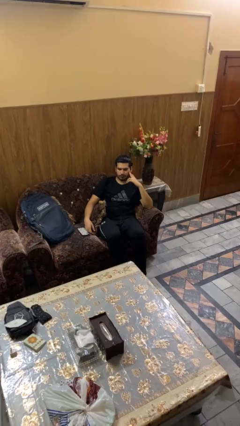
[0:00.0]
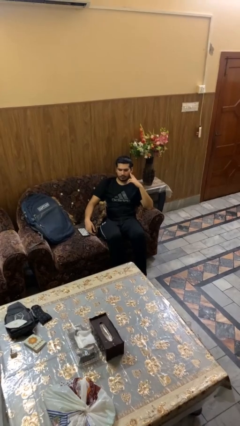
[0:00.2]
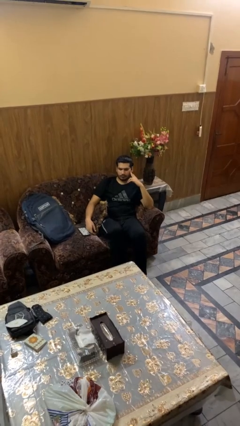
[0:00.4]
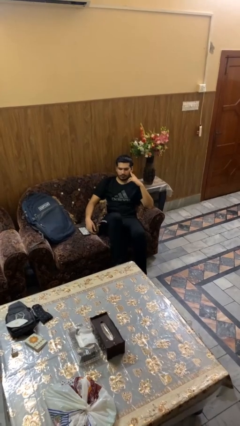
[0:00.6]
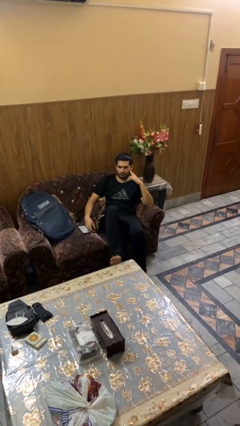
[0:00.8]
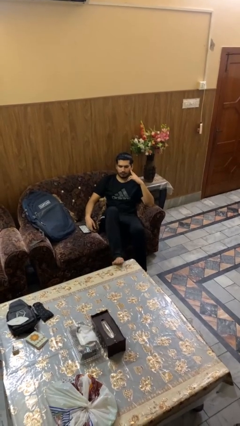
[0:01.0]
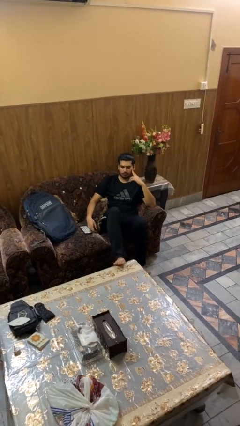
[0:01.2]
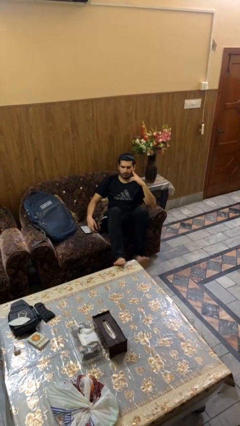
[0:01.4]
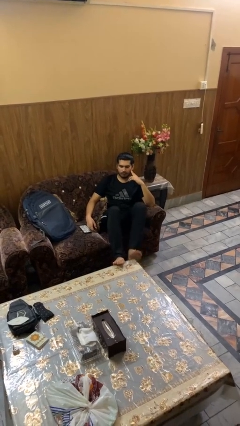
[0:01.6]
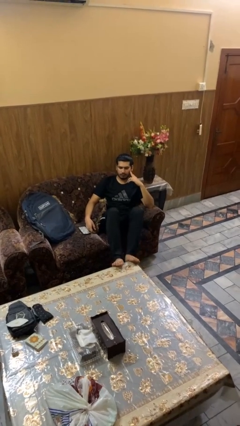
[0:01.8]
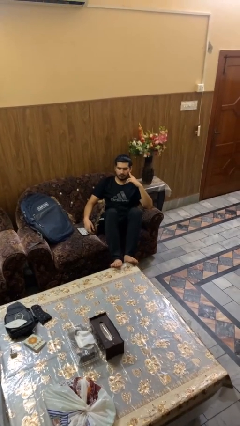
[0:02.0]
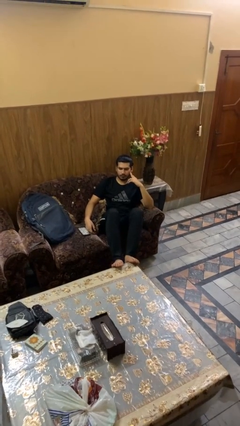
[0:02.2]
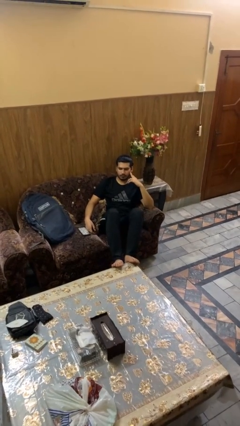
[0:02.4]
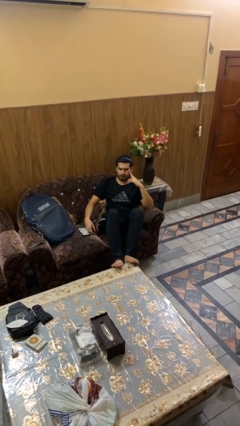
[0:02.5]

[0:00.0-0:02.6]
person puts feet up

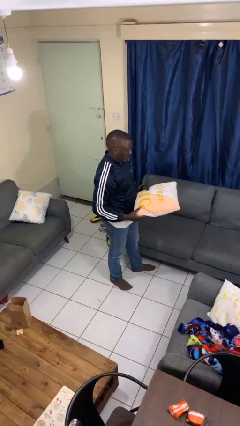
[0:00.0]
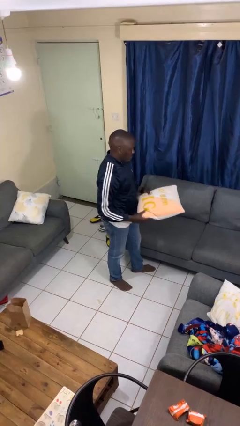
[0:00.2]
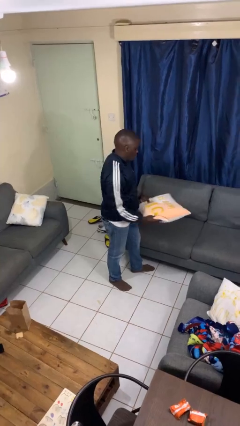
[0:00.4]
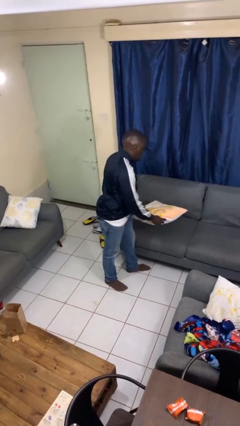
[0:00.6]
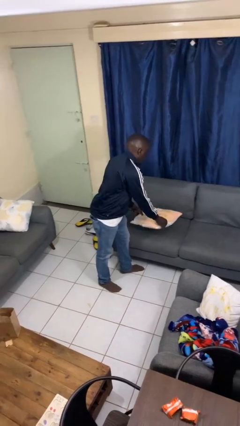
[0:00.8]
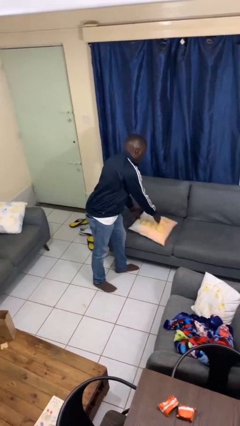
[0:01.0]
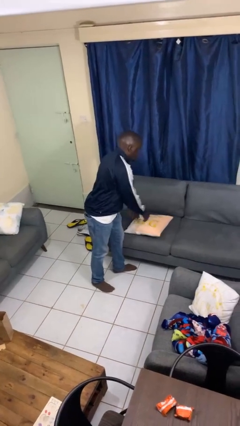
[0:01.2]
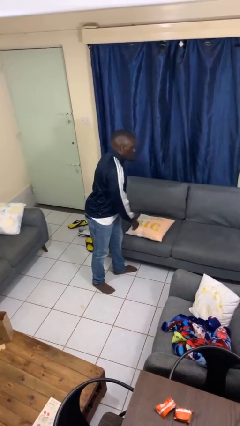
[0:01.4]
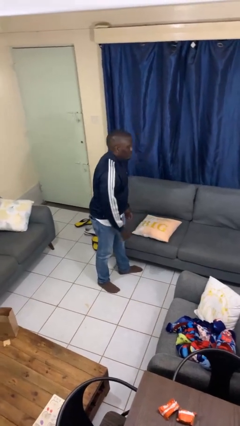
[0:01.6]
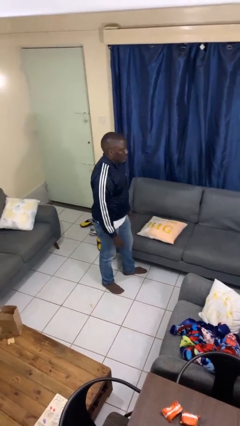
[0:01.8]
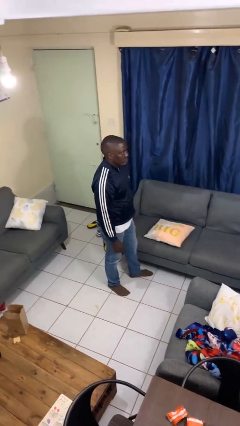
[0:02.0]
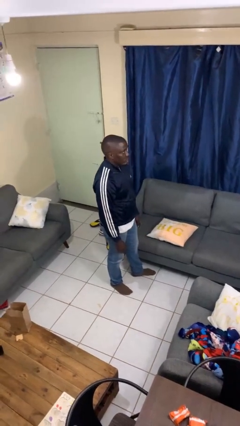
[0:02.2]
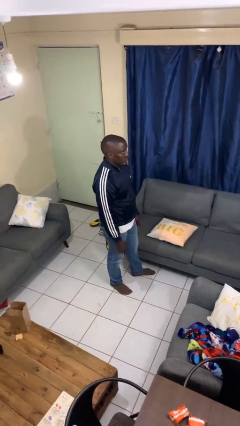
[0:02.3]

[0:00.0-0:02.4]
person puts down object on couch

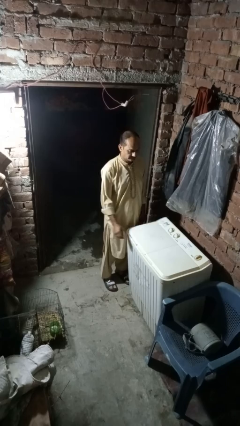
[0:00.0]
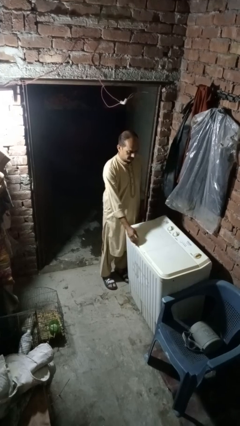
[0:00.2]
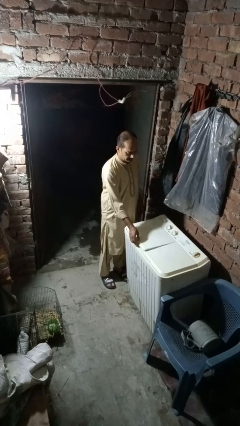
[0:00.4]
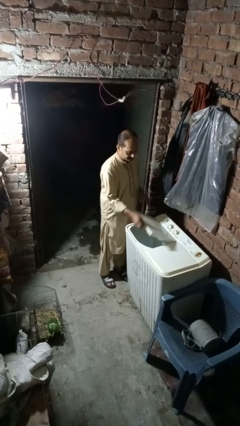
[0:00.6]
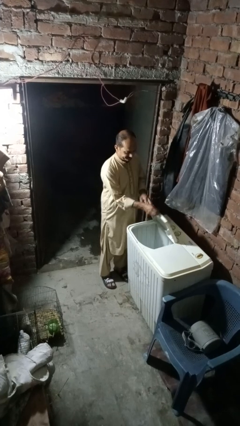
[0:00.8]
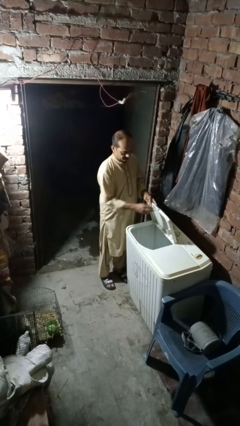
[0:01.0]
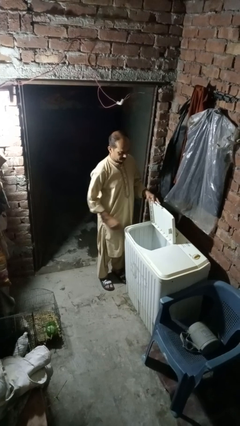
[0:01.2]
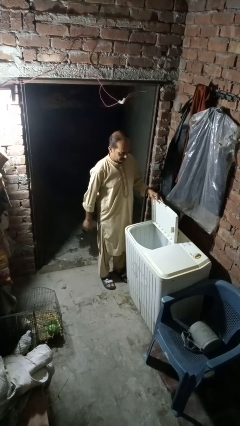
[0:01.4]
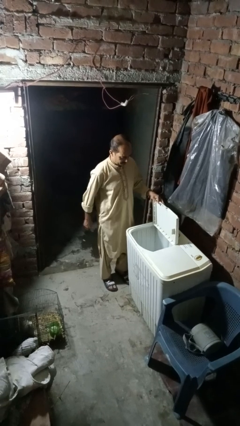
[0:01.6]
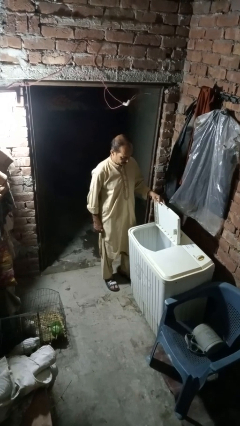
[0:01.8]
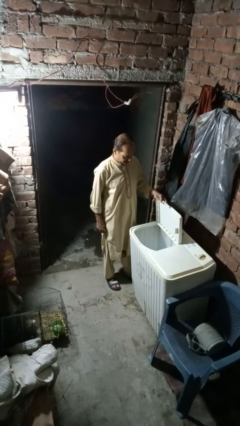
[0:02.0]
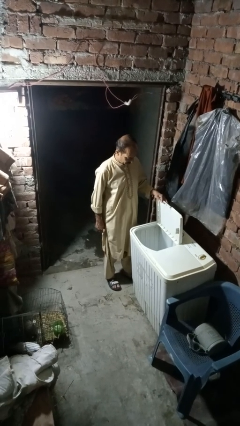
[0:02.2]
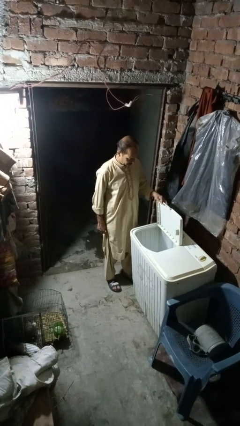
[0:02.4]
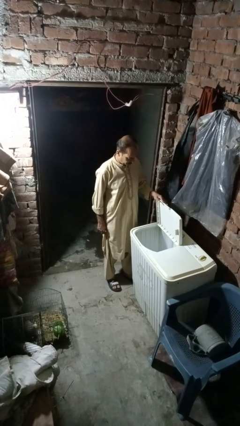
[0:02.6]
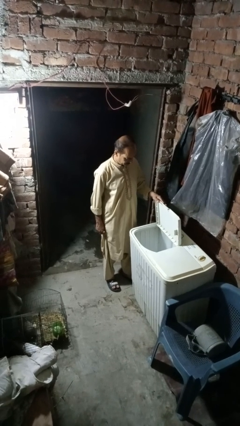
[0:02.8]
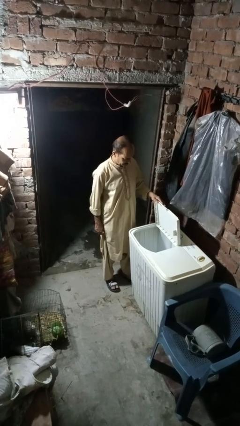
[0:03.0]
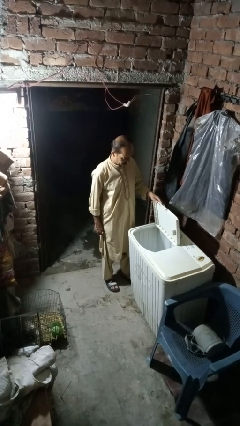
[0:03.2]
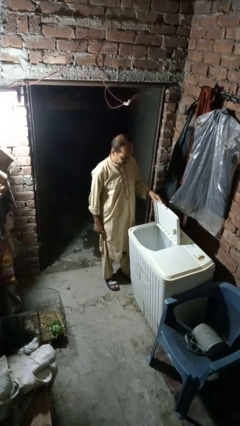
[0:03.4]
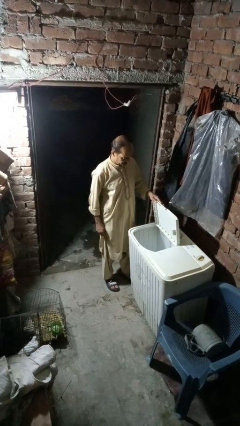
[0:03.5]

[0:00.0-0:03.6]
person opens clothes washer

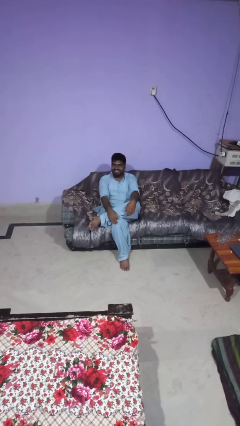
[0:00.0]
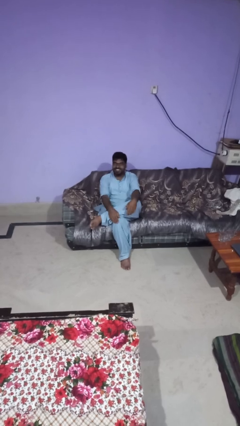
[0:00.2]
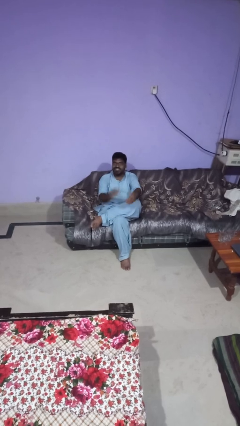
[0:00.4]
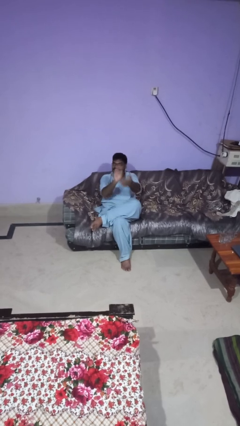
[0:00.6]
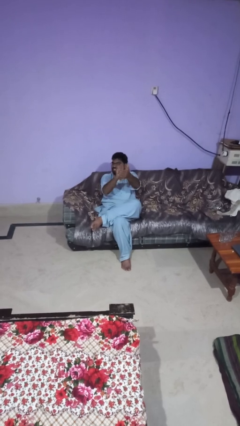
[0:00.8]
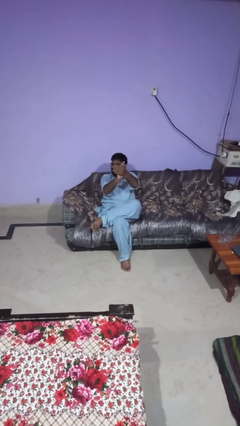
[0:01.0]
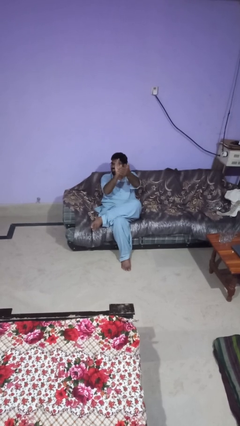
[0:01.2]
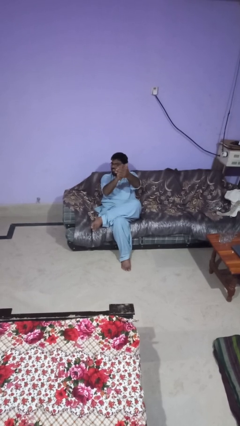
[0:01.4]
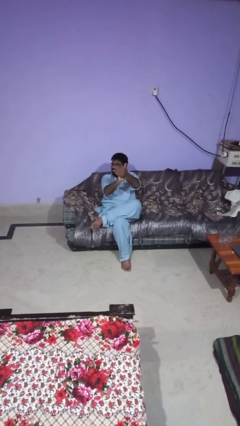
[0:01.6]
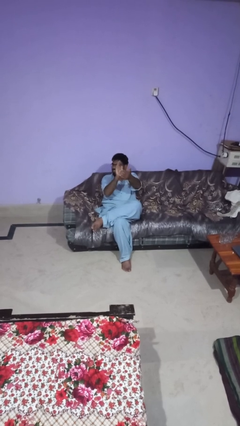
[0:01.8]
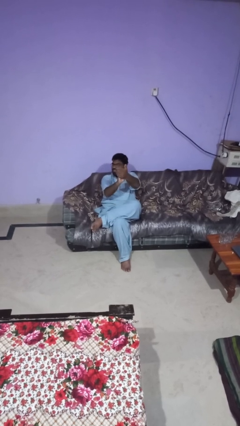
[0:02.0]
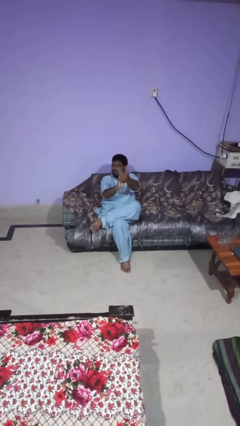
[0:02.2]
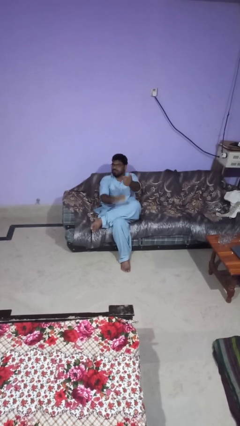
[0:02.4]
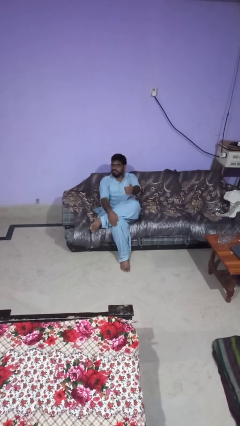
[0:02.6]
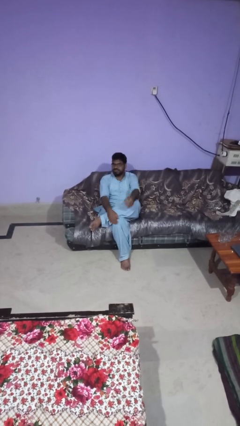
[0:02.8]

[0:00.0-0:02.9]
person claps hands

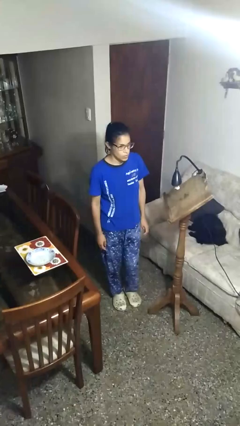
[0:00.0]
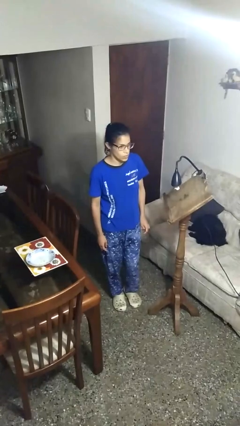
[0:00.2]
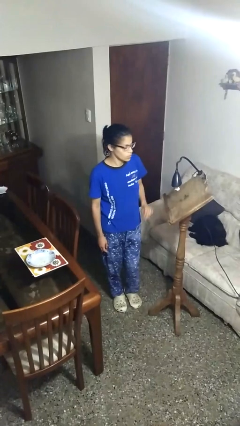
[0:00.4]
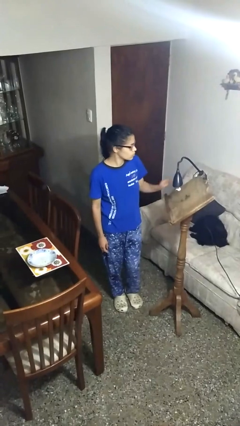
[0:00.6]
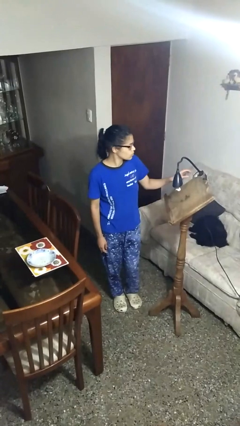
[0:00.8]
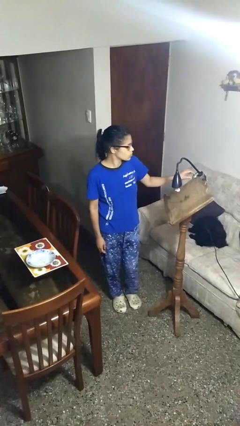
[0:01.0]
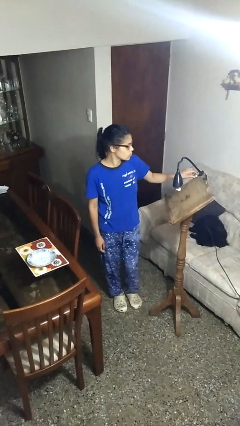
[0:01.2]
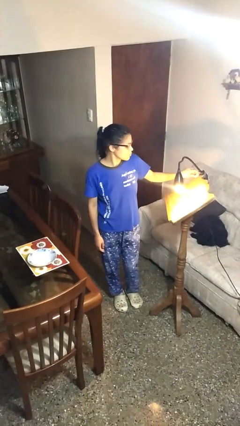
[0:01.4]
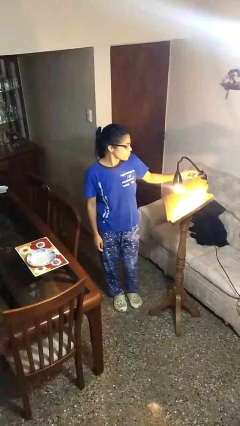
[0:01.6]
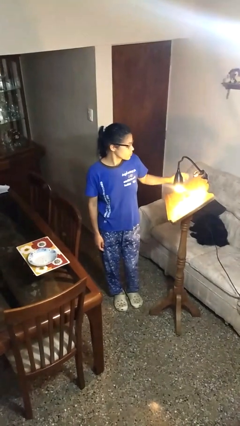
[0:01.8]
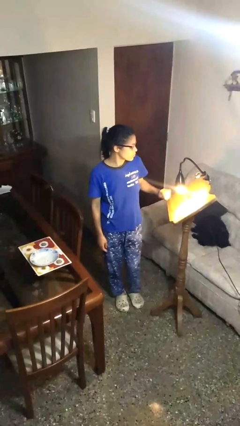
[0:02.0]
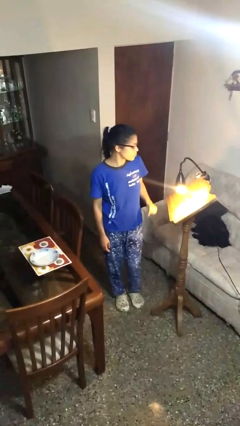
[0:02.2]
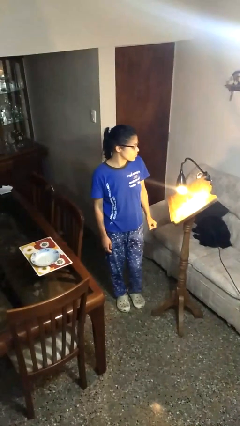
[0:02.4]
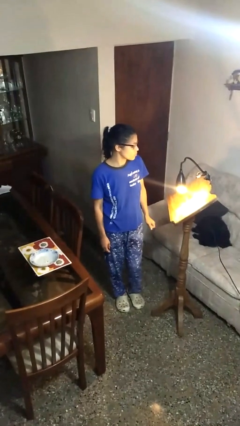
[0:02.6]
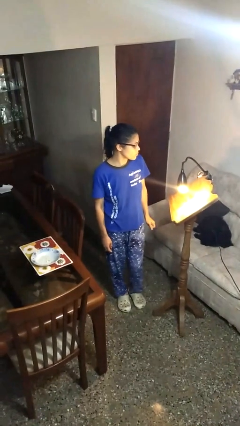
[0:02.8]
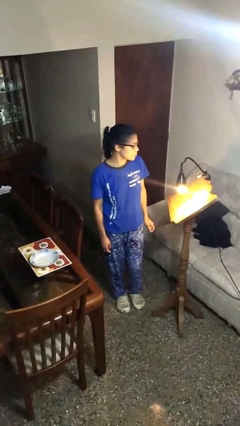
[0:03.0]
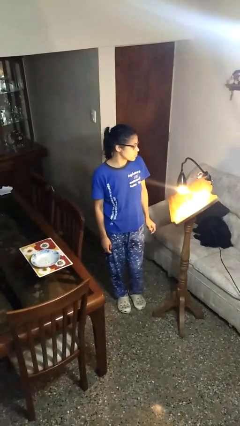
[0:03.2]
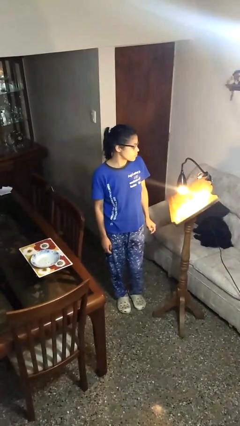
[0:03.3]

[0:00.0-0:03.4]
person turns on lamp

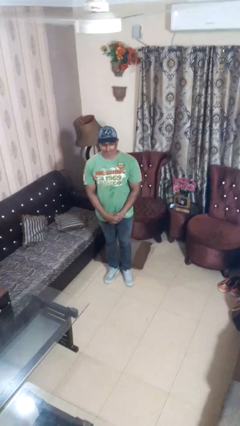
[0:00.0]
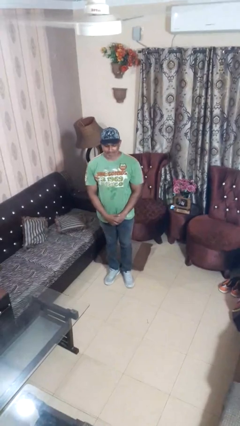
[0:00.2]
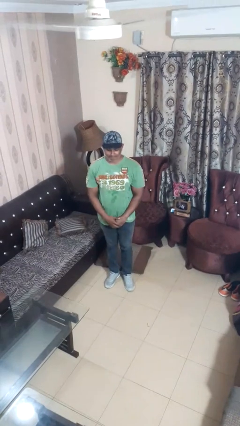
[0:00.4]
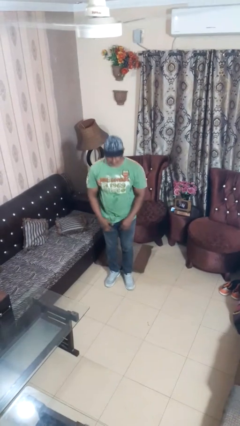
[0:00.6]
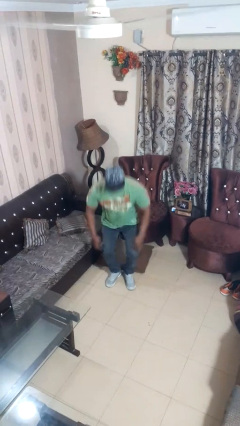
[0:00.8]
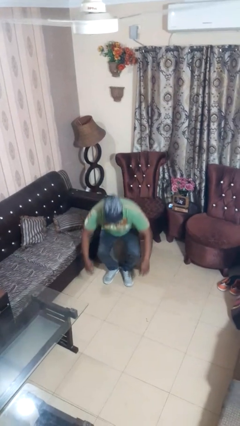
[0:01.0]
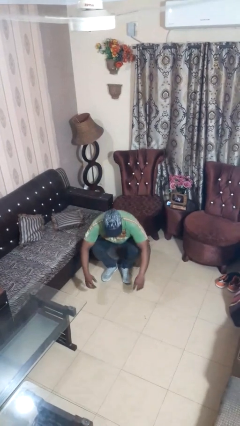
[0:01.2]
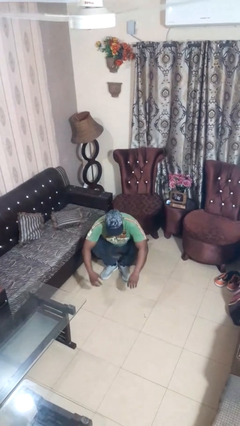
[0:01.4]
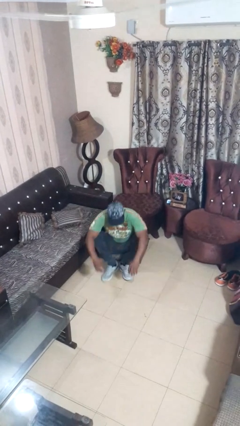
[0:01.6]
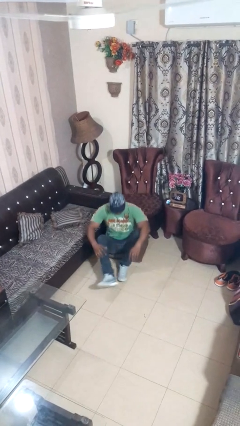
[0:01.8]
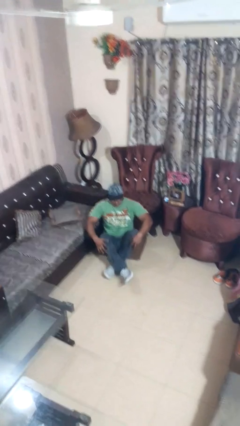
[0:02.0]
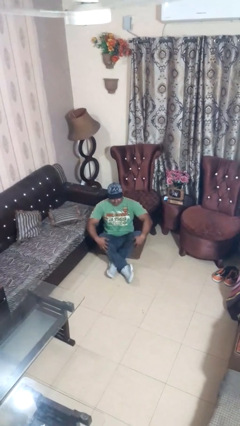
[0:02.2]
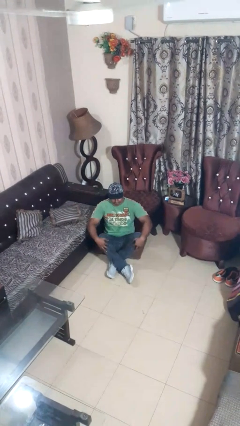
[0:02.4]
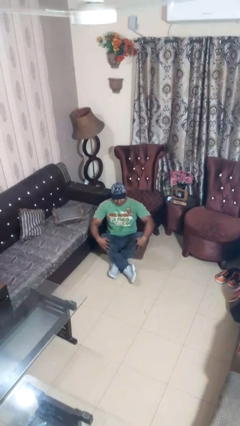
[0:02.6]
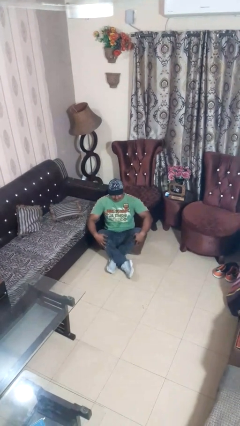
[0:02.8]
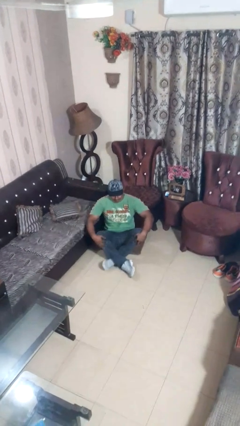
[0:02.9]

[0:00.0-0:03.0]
person sits crisscross
